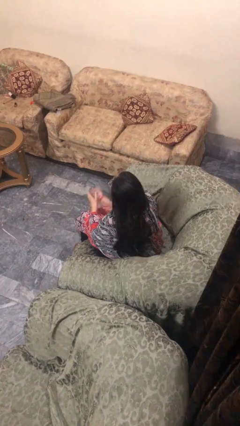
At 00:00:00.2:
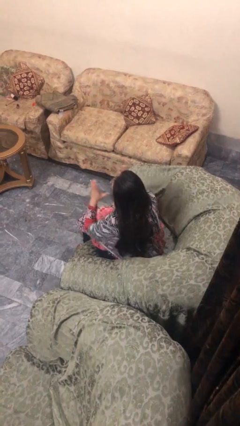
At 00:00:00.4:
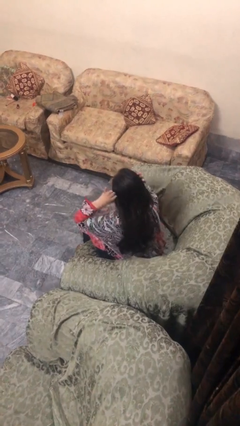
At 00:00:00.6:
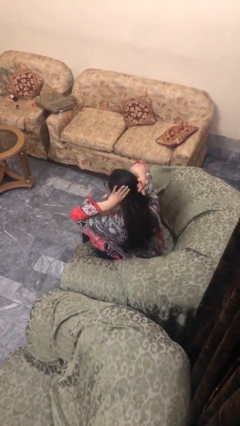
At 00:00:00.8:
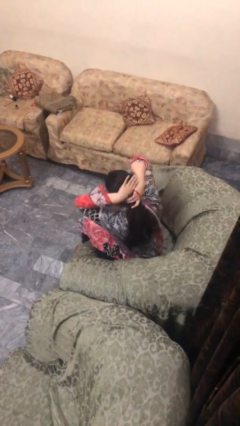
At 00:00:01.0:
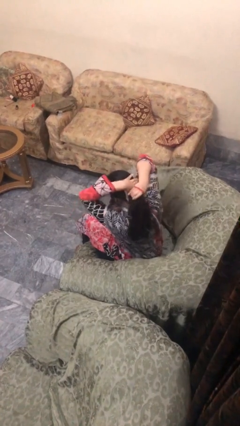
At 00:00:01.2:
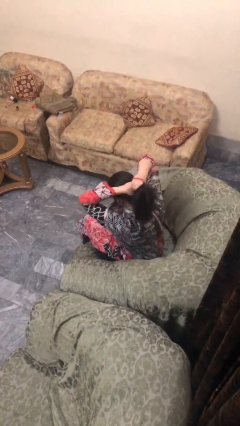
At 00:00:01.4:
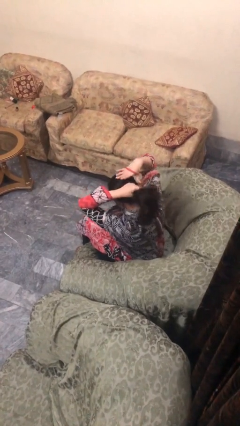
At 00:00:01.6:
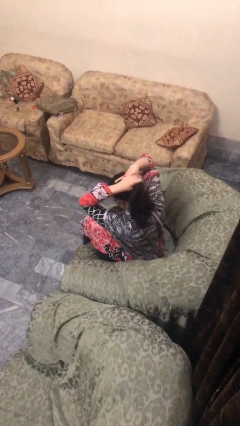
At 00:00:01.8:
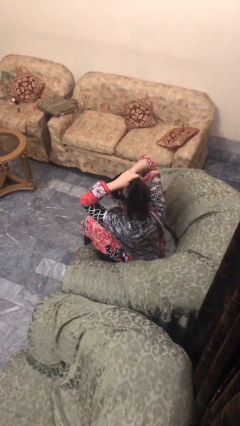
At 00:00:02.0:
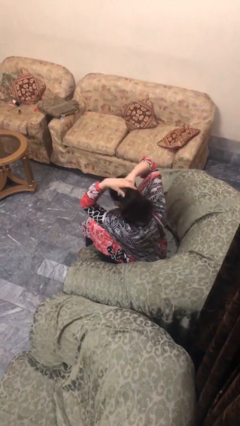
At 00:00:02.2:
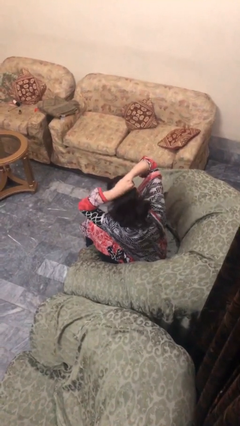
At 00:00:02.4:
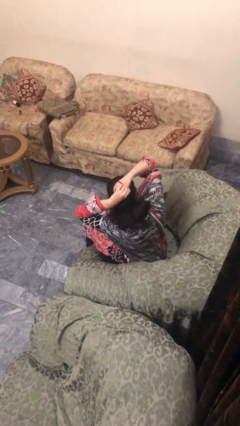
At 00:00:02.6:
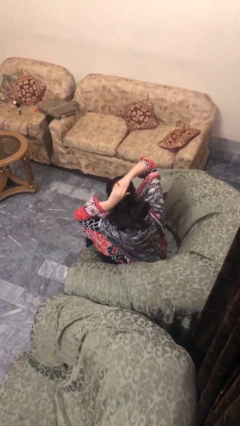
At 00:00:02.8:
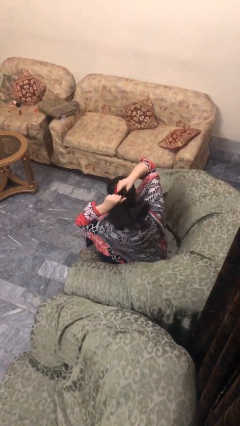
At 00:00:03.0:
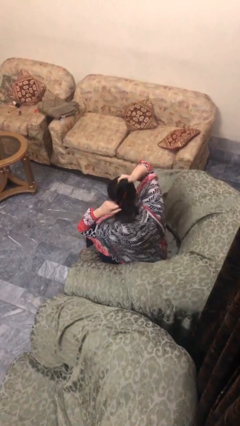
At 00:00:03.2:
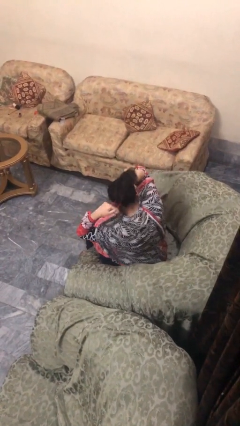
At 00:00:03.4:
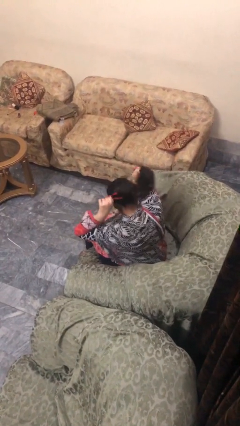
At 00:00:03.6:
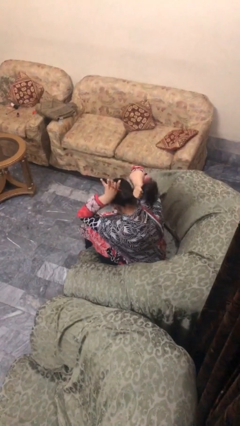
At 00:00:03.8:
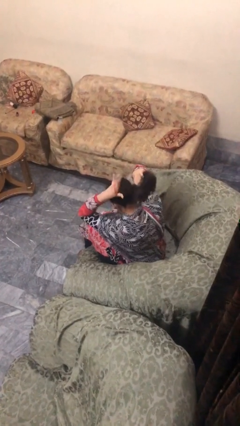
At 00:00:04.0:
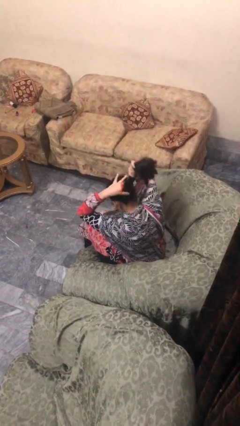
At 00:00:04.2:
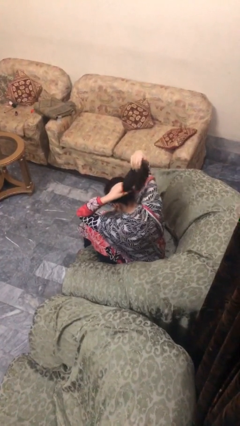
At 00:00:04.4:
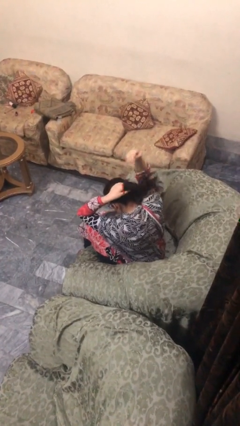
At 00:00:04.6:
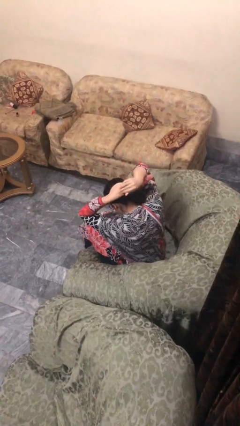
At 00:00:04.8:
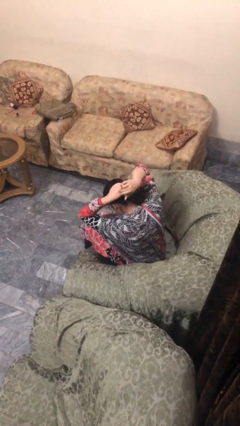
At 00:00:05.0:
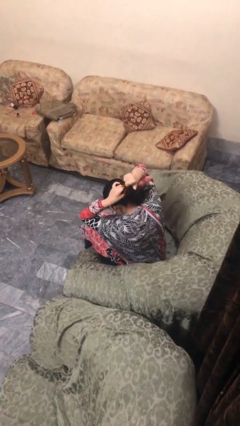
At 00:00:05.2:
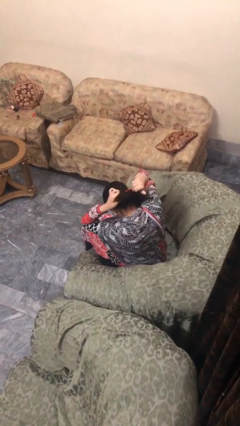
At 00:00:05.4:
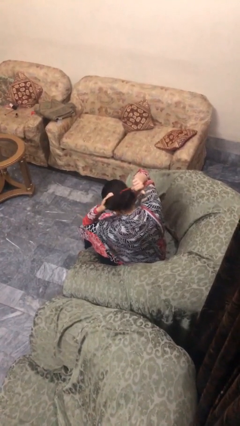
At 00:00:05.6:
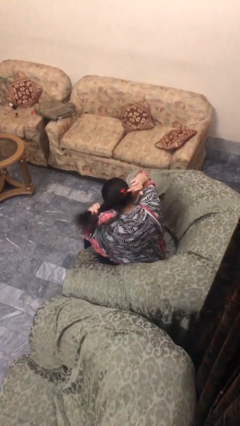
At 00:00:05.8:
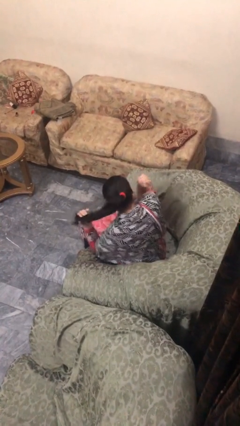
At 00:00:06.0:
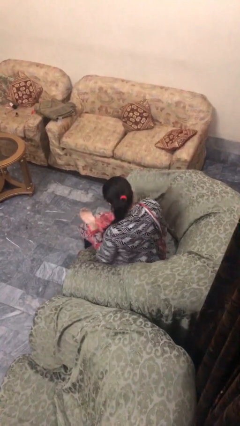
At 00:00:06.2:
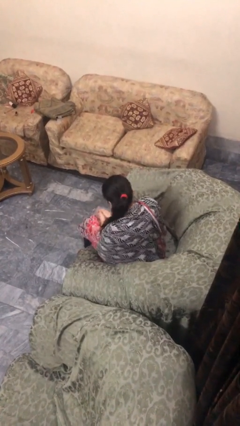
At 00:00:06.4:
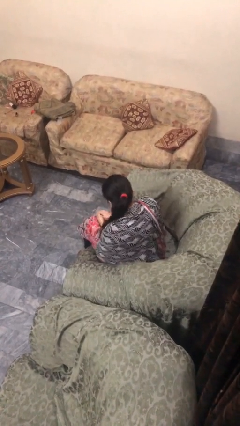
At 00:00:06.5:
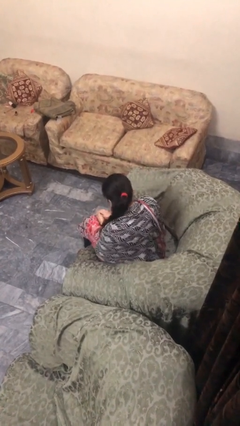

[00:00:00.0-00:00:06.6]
person puts hair in ponytail

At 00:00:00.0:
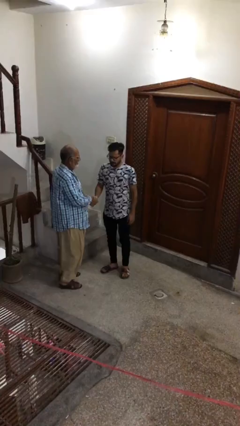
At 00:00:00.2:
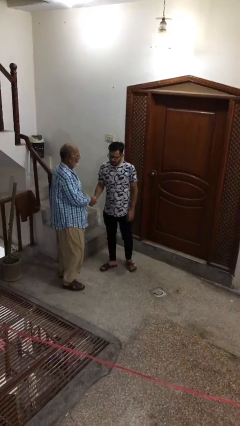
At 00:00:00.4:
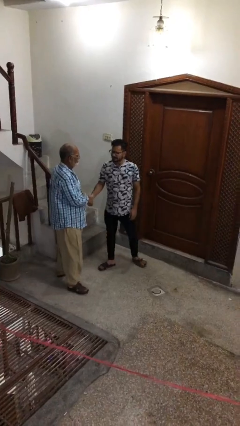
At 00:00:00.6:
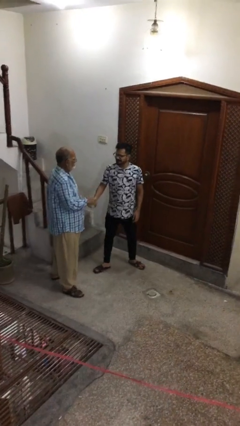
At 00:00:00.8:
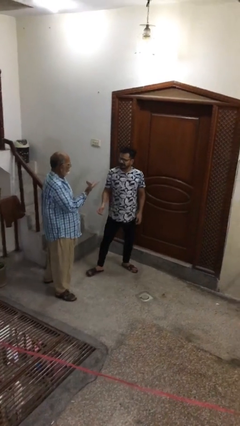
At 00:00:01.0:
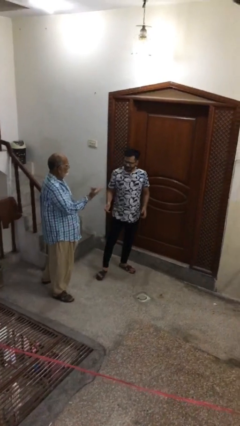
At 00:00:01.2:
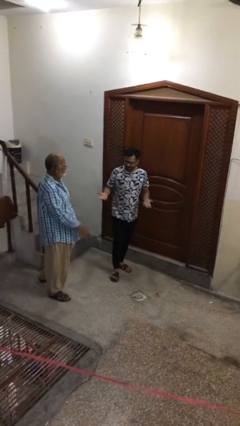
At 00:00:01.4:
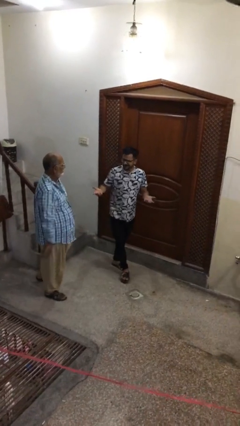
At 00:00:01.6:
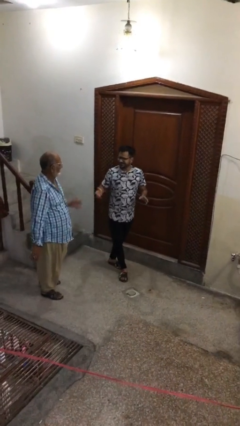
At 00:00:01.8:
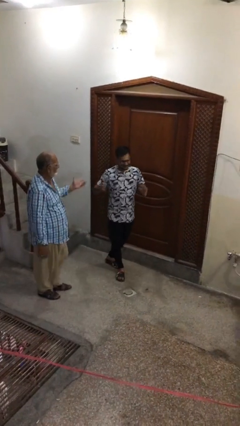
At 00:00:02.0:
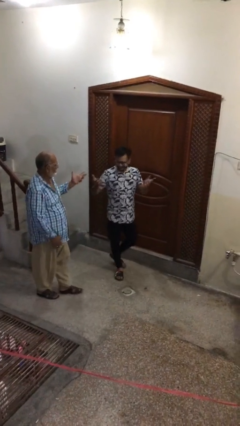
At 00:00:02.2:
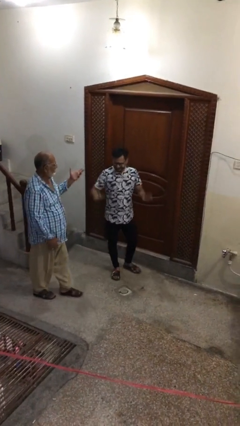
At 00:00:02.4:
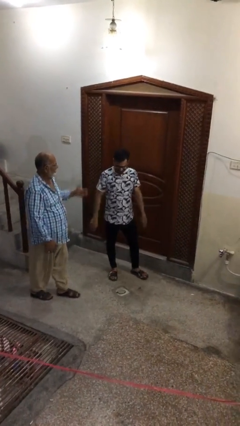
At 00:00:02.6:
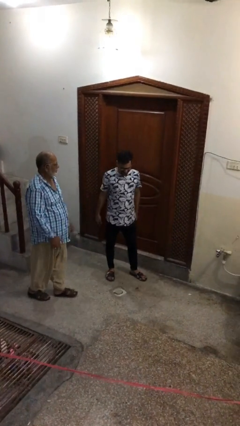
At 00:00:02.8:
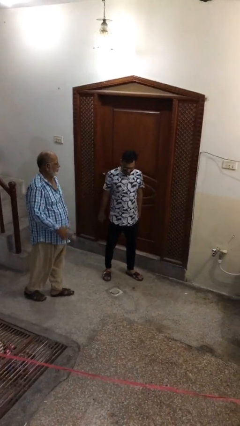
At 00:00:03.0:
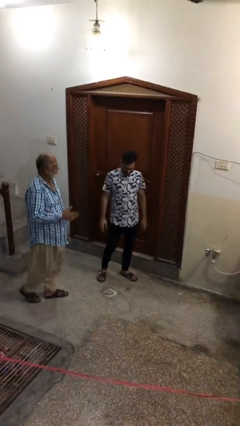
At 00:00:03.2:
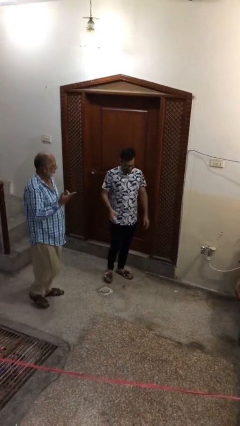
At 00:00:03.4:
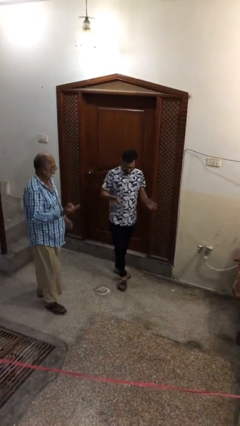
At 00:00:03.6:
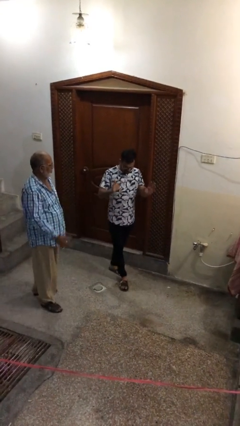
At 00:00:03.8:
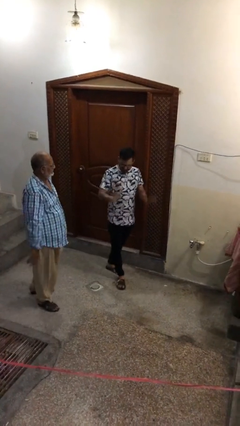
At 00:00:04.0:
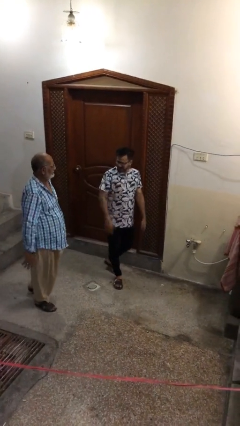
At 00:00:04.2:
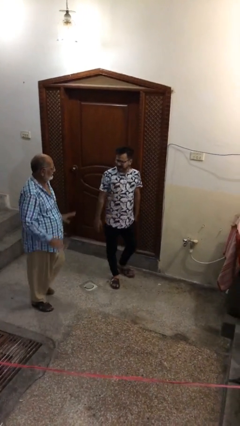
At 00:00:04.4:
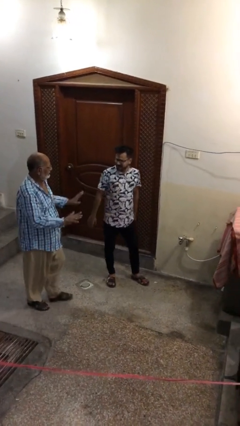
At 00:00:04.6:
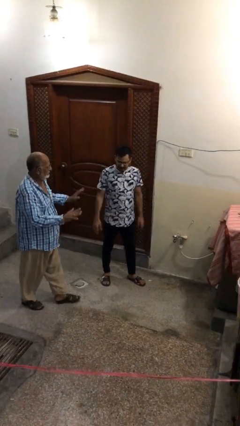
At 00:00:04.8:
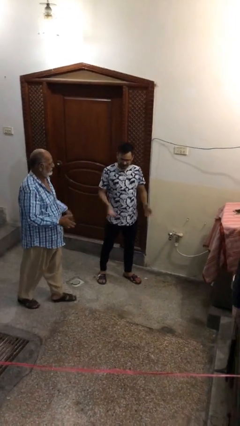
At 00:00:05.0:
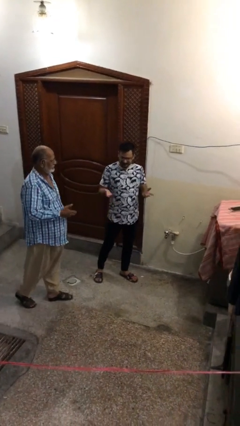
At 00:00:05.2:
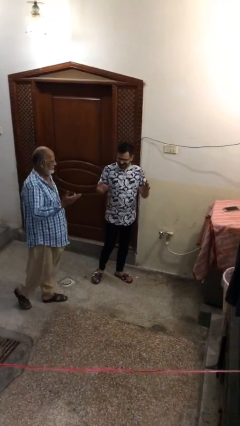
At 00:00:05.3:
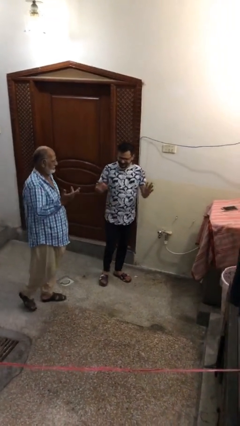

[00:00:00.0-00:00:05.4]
person talks to person

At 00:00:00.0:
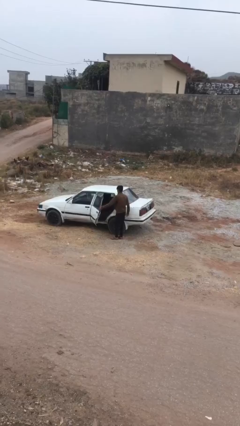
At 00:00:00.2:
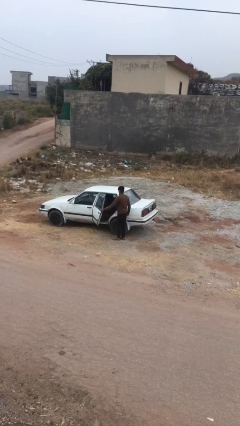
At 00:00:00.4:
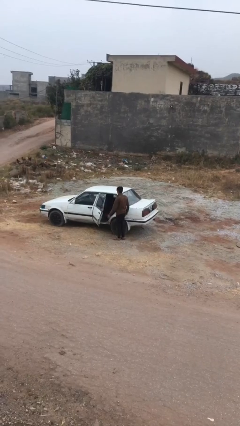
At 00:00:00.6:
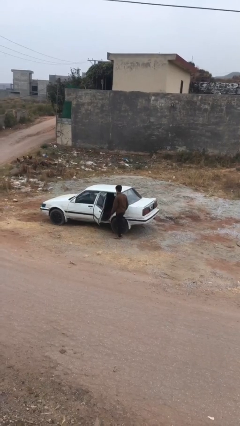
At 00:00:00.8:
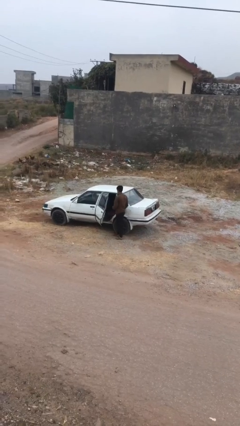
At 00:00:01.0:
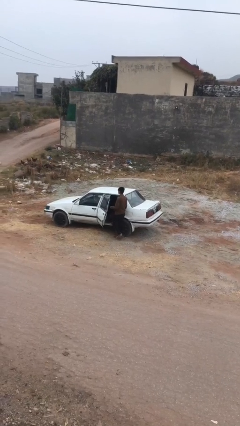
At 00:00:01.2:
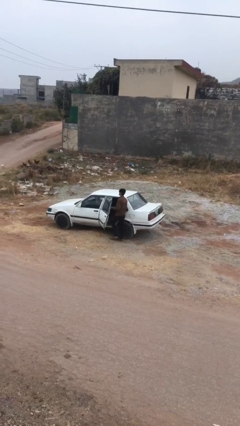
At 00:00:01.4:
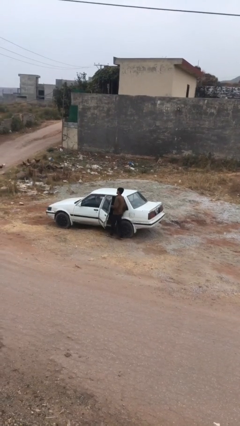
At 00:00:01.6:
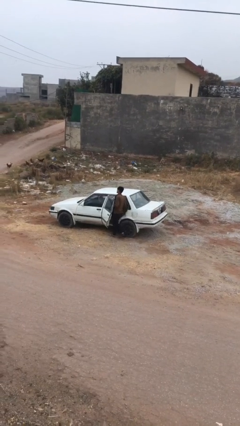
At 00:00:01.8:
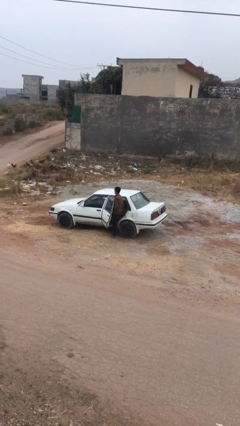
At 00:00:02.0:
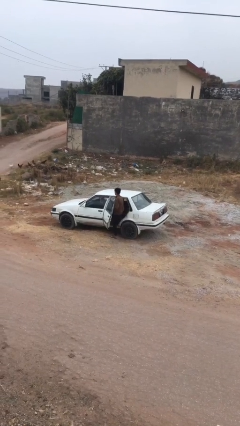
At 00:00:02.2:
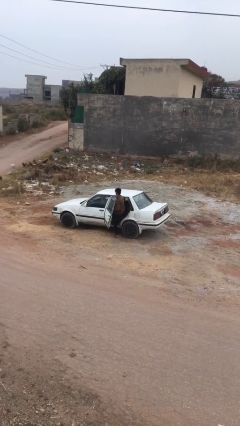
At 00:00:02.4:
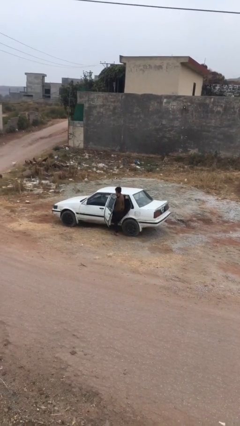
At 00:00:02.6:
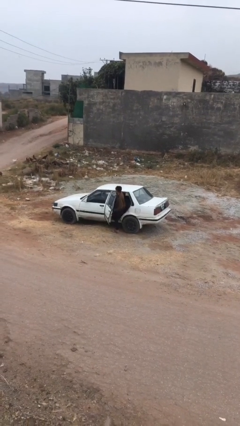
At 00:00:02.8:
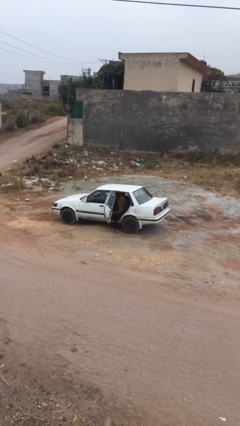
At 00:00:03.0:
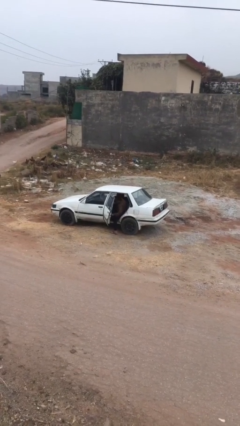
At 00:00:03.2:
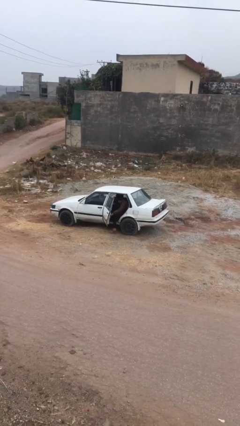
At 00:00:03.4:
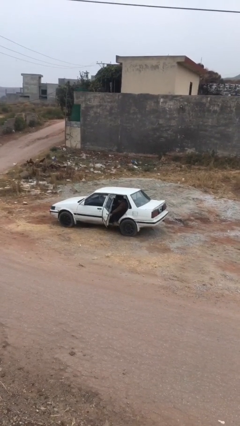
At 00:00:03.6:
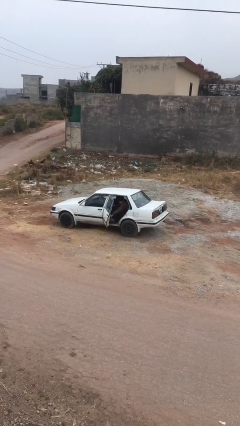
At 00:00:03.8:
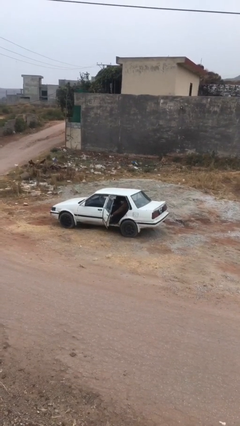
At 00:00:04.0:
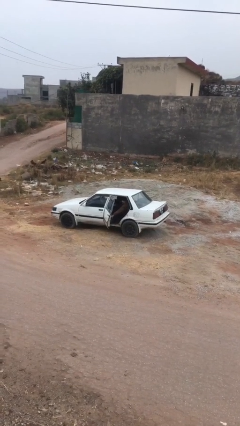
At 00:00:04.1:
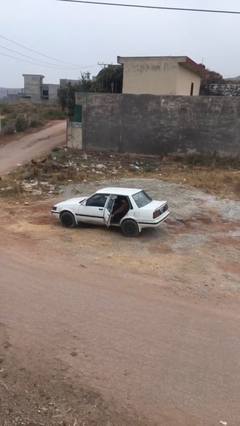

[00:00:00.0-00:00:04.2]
person enters car

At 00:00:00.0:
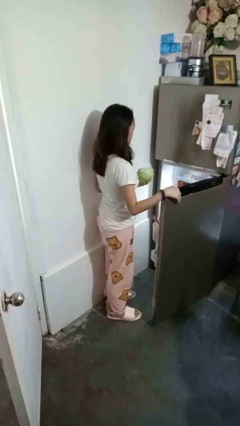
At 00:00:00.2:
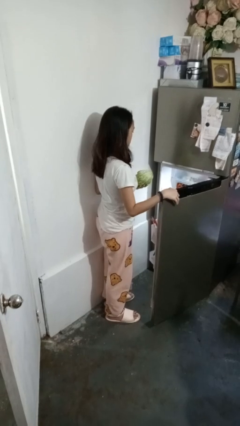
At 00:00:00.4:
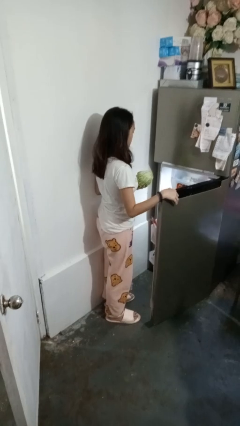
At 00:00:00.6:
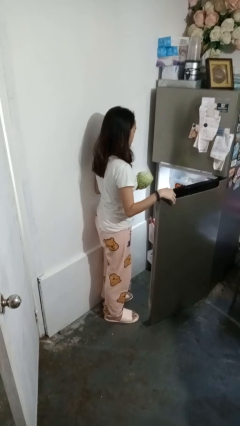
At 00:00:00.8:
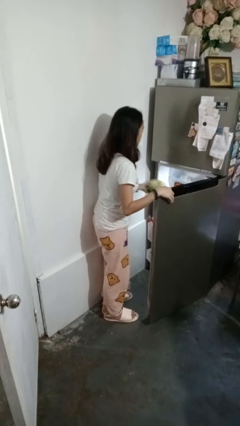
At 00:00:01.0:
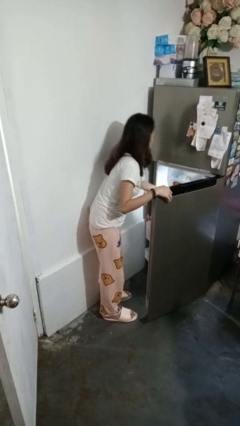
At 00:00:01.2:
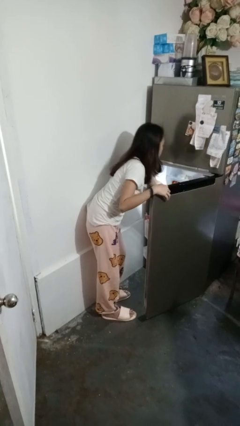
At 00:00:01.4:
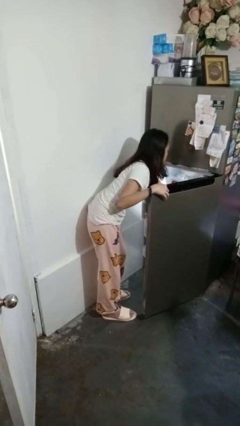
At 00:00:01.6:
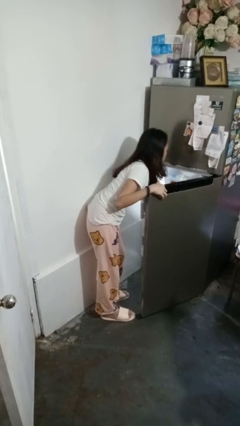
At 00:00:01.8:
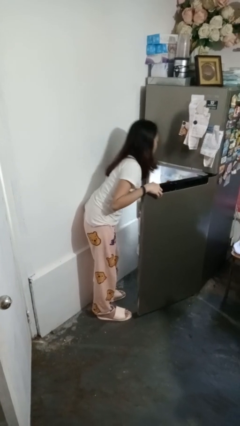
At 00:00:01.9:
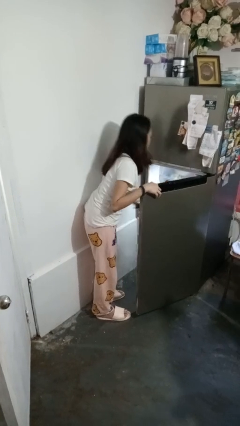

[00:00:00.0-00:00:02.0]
person puts object into refrigerator
